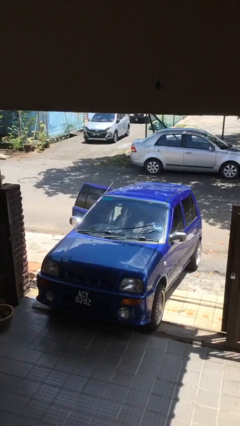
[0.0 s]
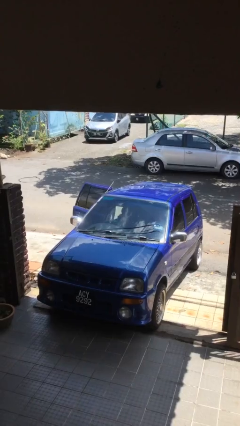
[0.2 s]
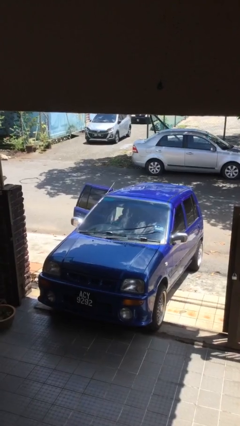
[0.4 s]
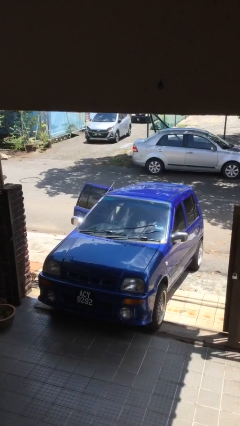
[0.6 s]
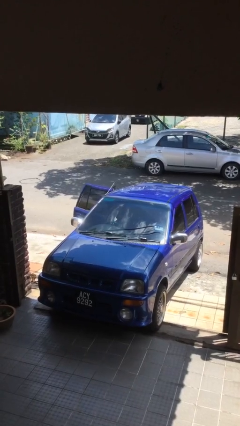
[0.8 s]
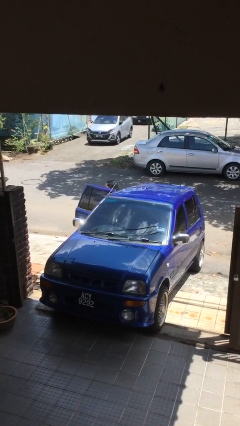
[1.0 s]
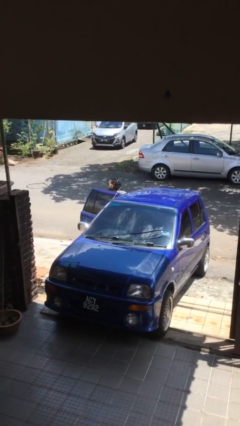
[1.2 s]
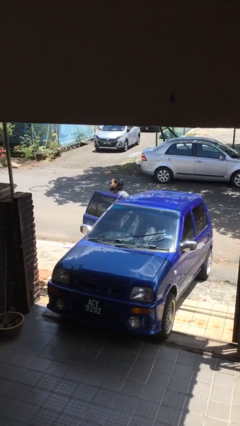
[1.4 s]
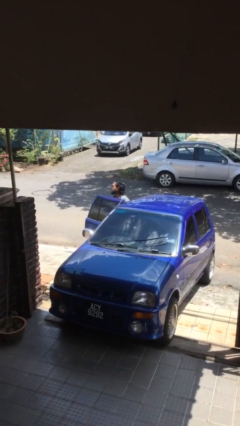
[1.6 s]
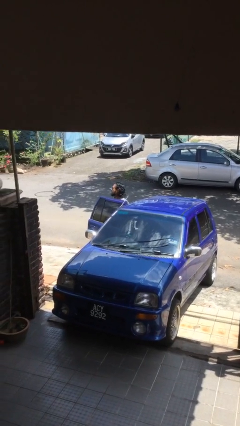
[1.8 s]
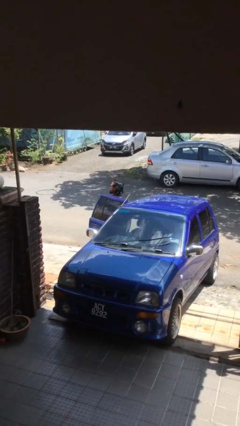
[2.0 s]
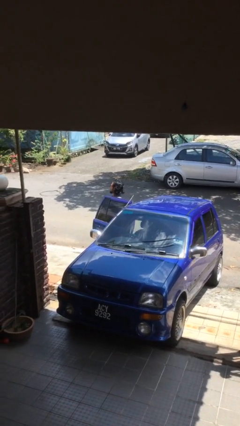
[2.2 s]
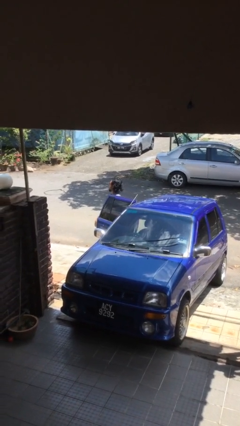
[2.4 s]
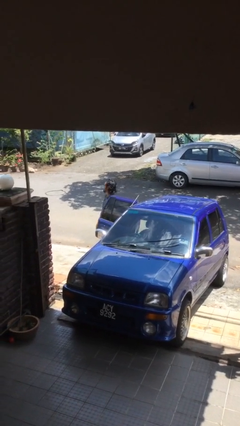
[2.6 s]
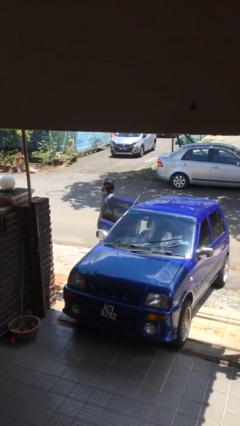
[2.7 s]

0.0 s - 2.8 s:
person exits car

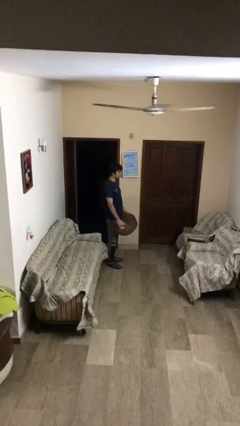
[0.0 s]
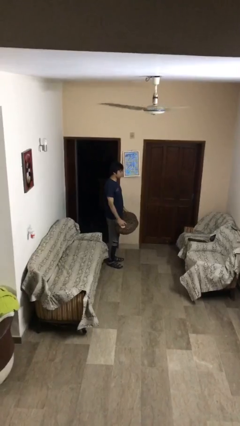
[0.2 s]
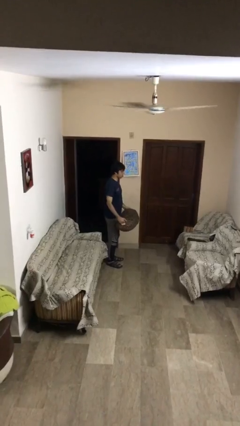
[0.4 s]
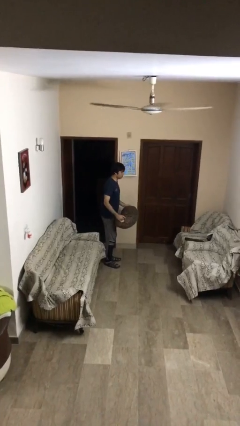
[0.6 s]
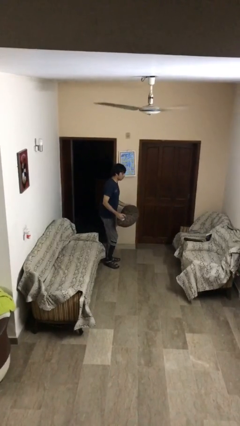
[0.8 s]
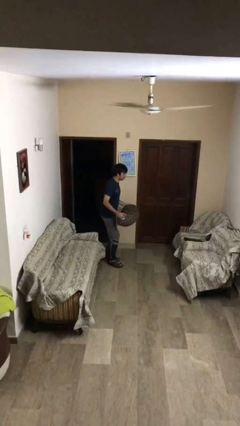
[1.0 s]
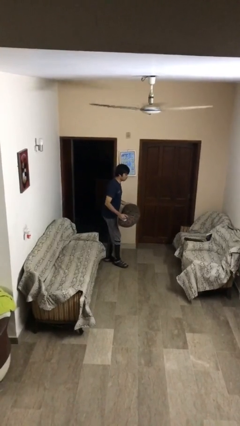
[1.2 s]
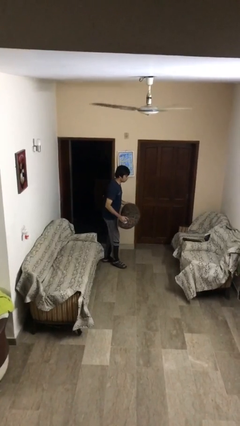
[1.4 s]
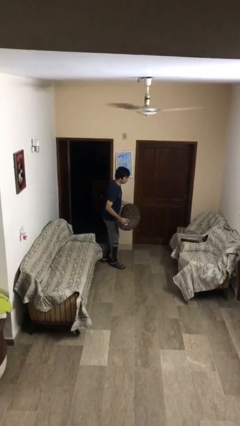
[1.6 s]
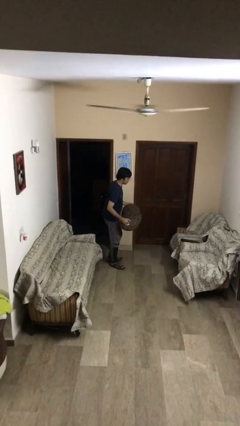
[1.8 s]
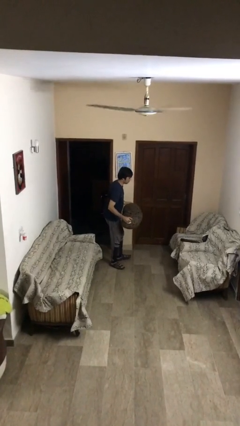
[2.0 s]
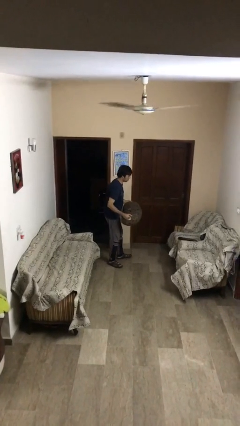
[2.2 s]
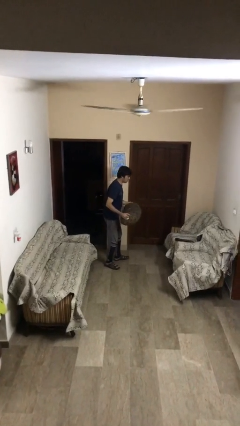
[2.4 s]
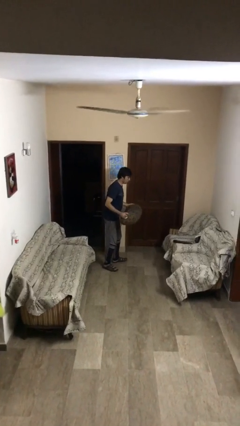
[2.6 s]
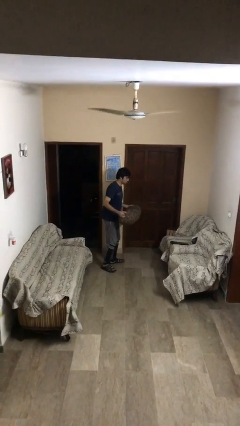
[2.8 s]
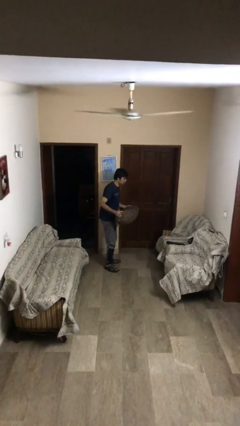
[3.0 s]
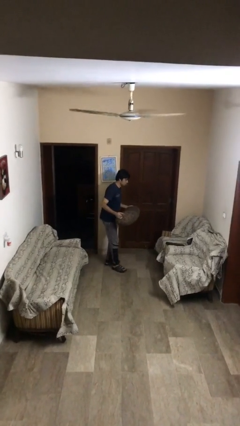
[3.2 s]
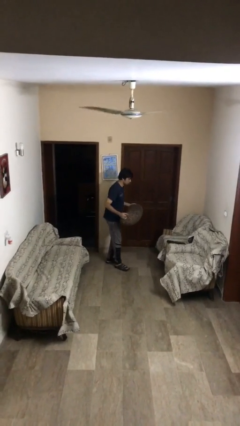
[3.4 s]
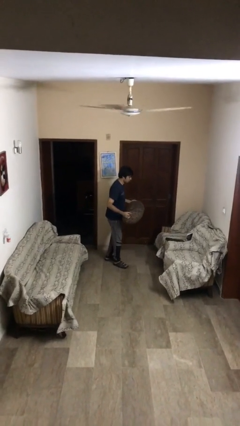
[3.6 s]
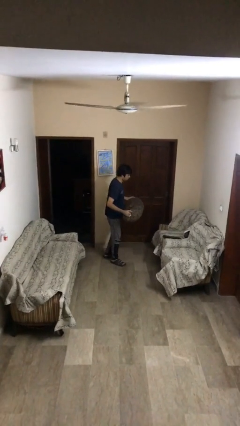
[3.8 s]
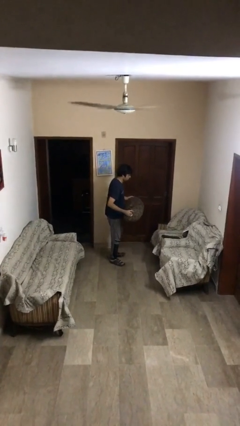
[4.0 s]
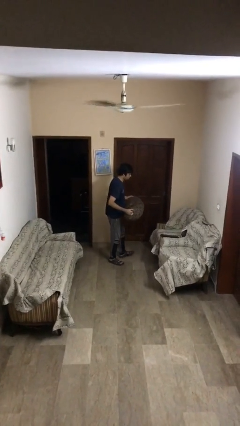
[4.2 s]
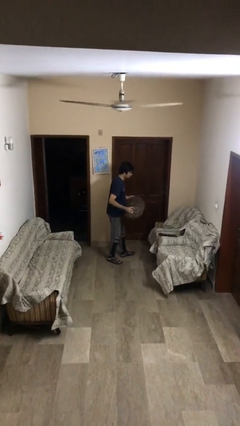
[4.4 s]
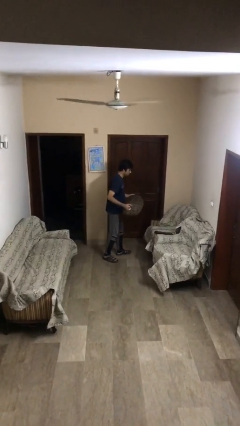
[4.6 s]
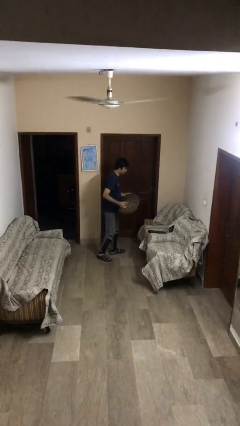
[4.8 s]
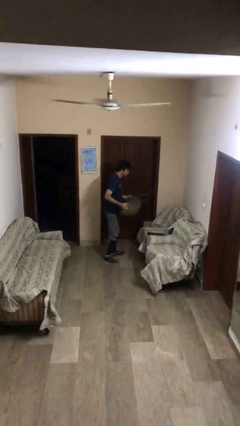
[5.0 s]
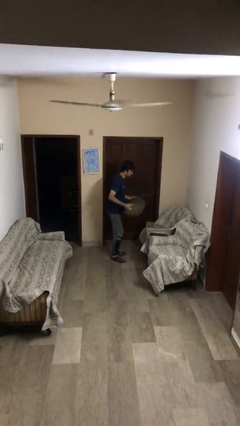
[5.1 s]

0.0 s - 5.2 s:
person carries heavy object

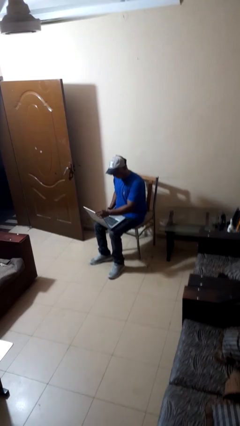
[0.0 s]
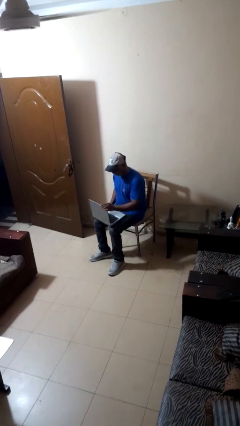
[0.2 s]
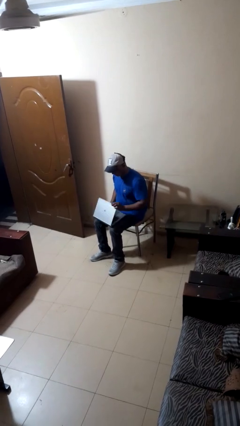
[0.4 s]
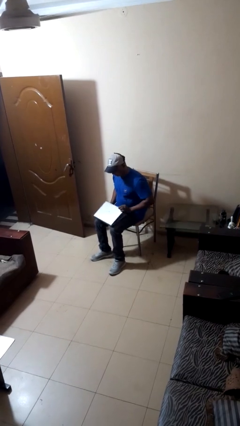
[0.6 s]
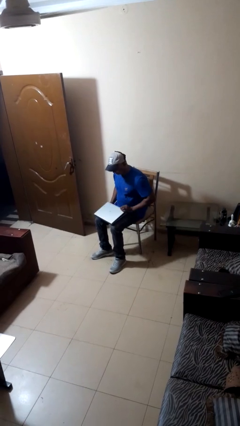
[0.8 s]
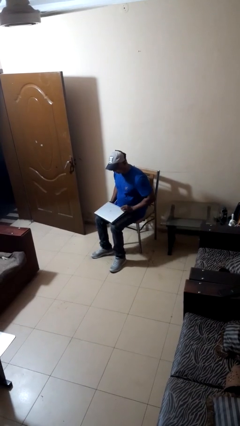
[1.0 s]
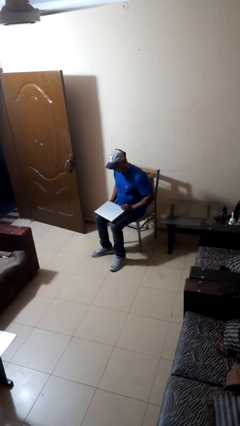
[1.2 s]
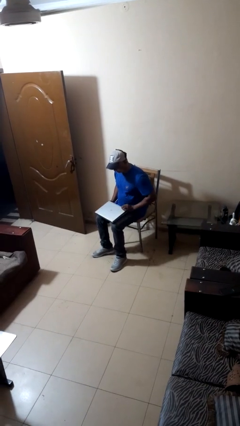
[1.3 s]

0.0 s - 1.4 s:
person closes laptop

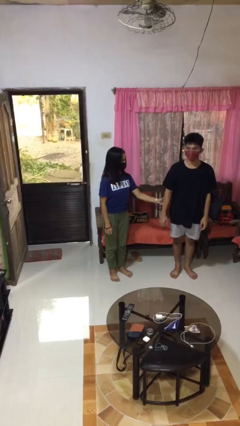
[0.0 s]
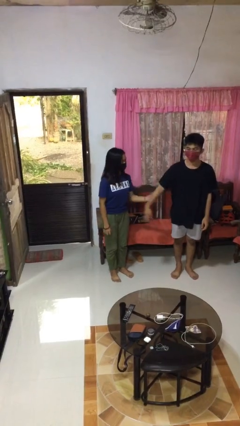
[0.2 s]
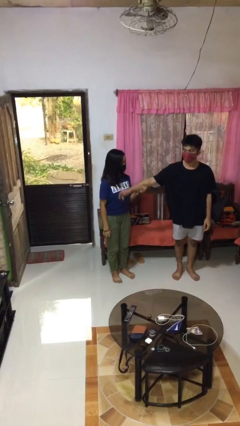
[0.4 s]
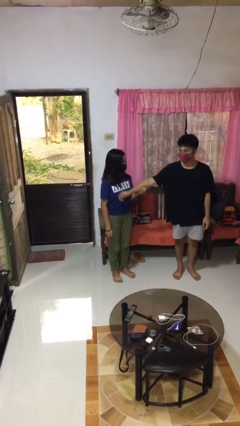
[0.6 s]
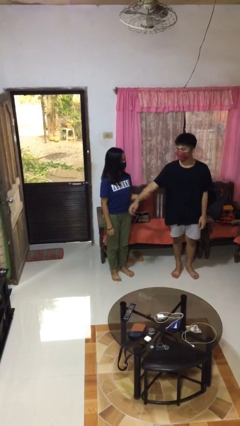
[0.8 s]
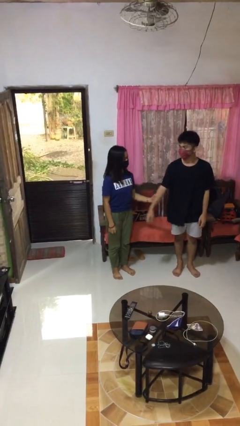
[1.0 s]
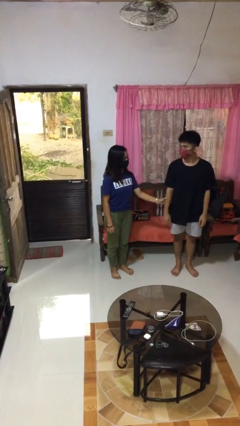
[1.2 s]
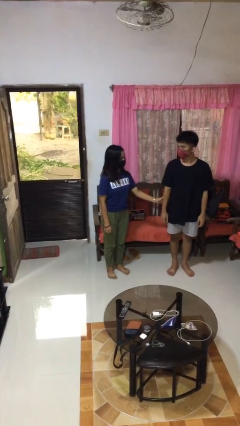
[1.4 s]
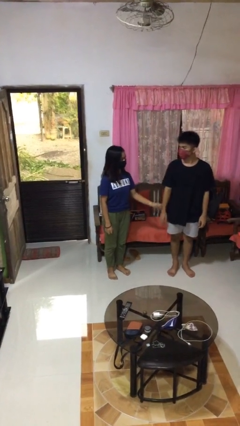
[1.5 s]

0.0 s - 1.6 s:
person grabs person by forearm

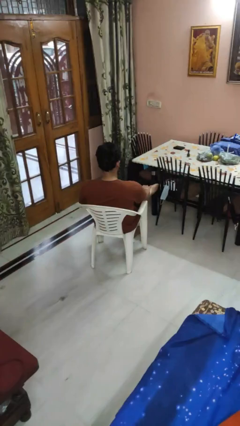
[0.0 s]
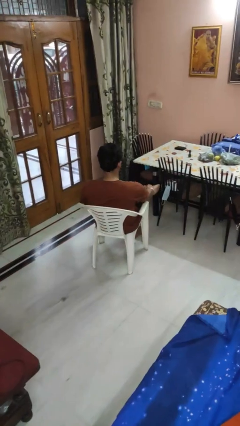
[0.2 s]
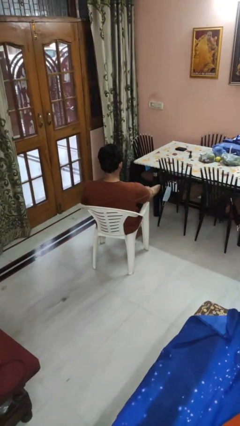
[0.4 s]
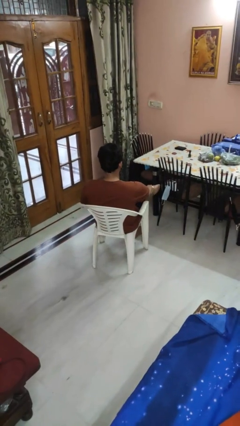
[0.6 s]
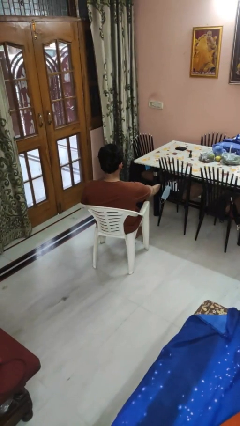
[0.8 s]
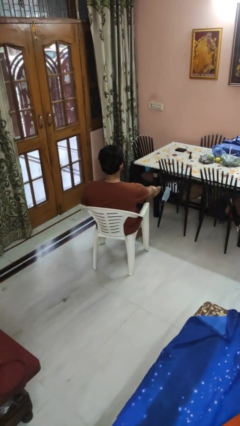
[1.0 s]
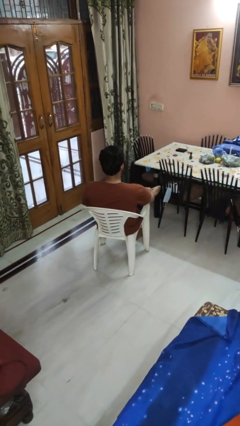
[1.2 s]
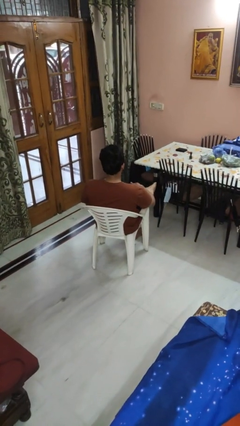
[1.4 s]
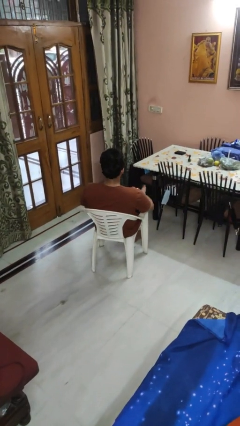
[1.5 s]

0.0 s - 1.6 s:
person rubs foot

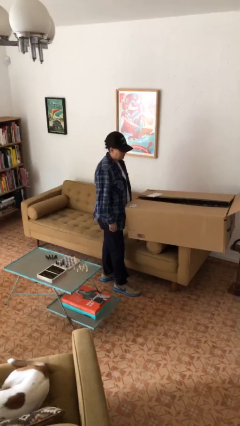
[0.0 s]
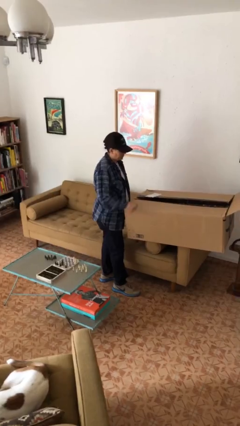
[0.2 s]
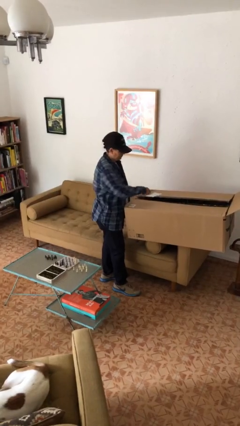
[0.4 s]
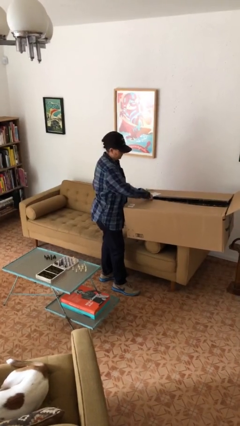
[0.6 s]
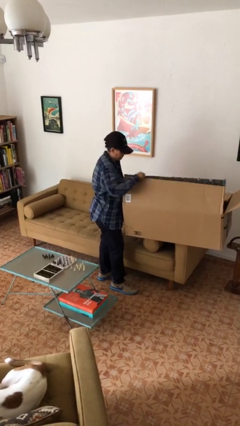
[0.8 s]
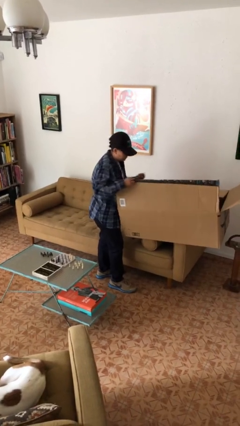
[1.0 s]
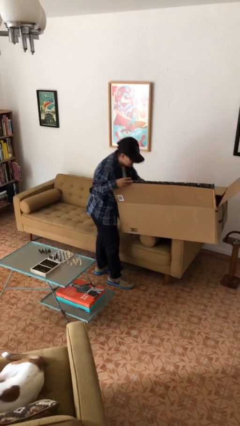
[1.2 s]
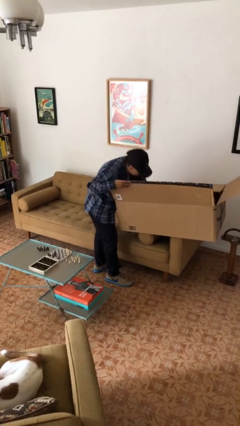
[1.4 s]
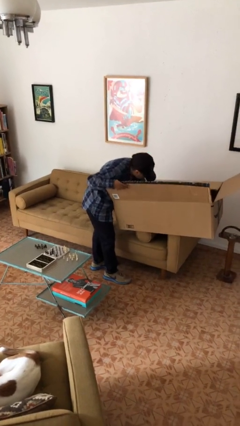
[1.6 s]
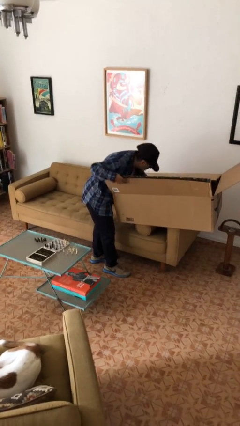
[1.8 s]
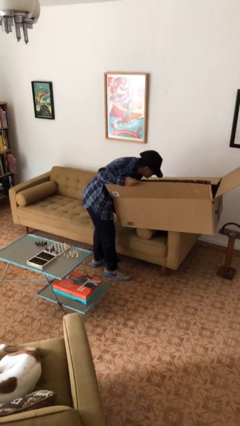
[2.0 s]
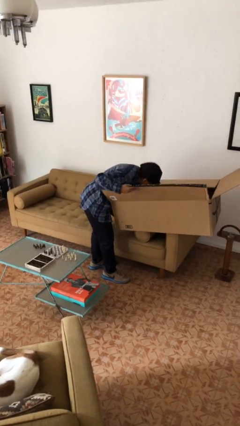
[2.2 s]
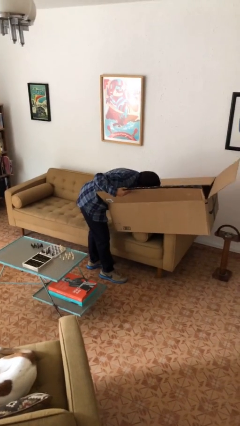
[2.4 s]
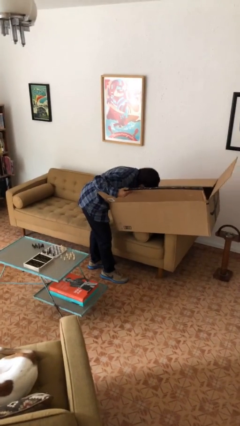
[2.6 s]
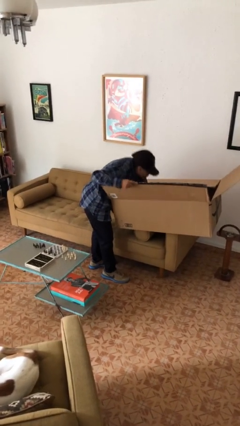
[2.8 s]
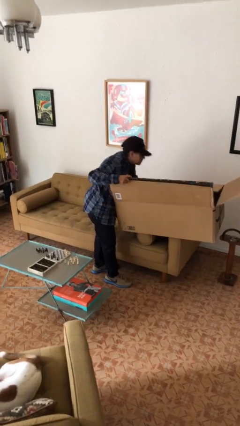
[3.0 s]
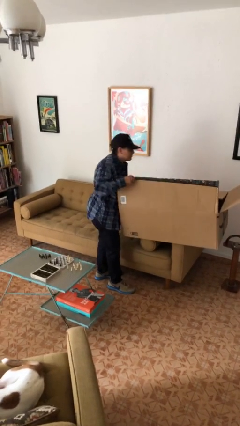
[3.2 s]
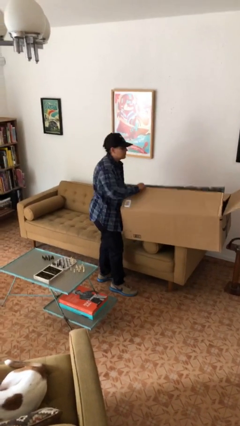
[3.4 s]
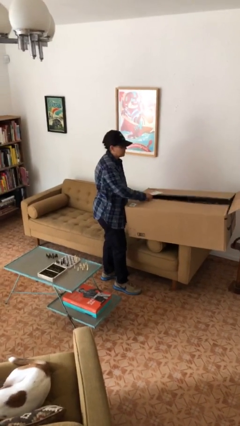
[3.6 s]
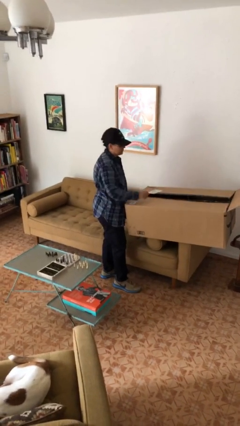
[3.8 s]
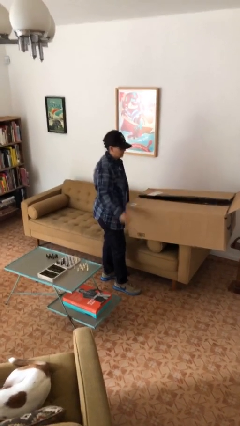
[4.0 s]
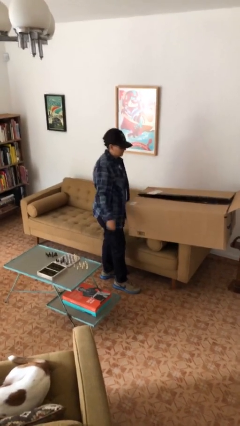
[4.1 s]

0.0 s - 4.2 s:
person searches in box

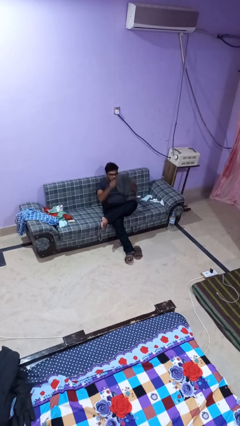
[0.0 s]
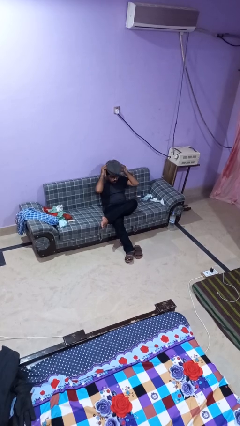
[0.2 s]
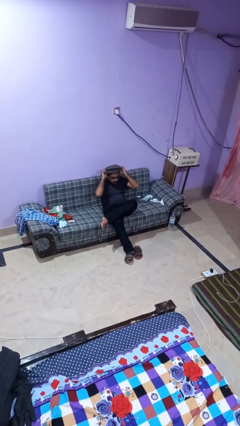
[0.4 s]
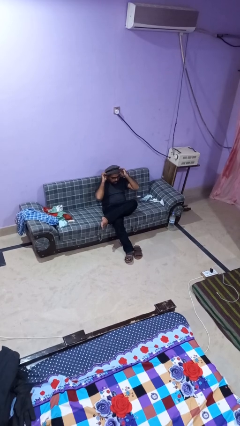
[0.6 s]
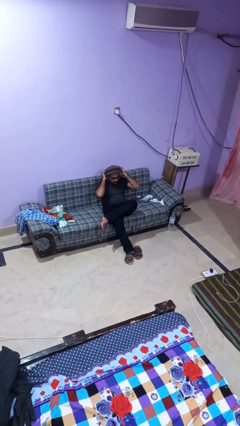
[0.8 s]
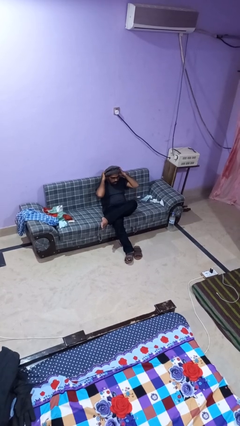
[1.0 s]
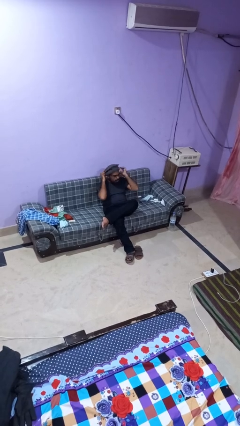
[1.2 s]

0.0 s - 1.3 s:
person puts on hat
